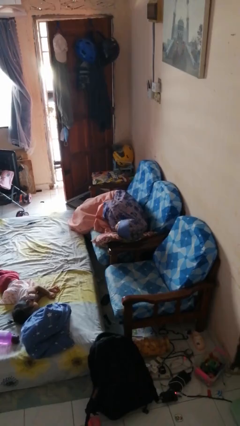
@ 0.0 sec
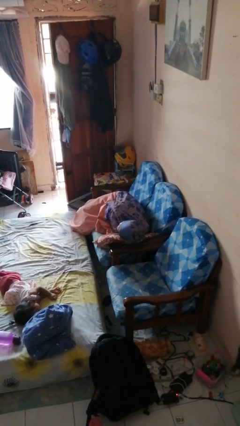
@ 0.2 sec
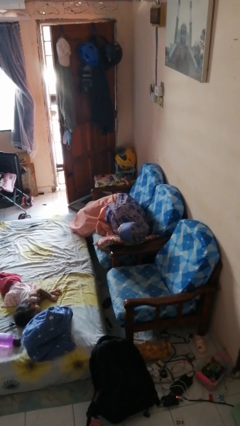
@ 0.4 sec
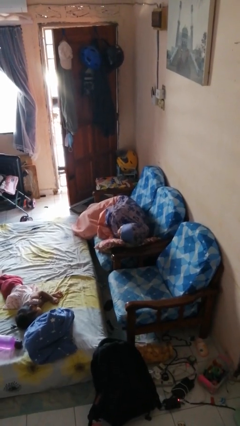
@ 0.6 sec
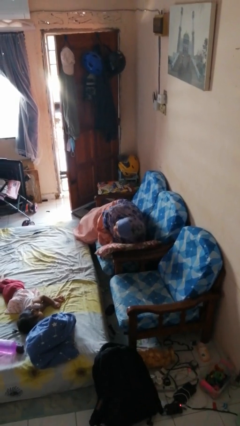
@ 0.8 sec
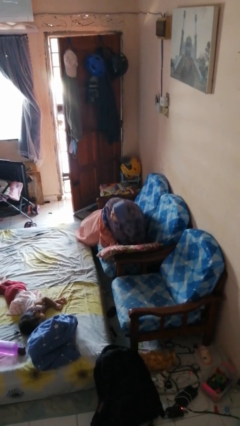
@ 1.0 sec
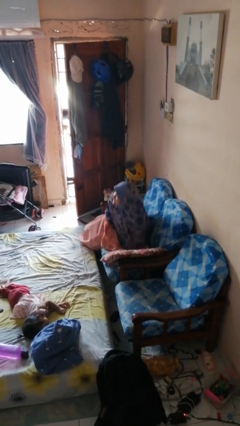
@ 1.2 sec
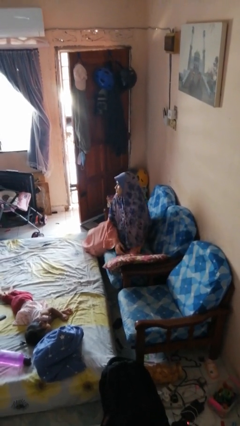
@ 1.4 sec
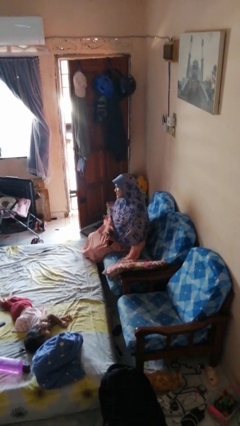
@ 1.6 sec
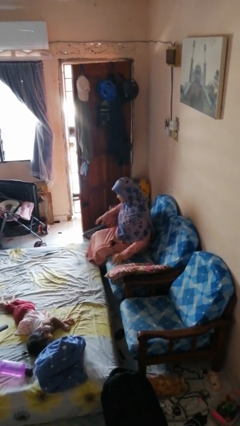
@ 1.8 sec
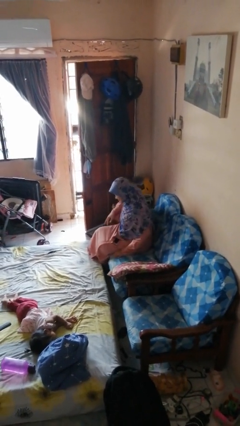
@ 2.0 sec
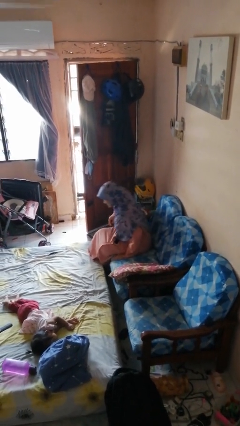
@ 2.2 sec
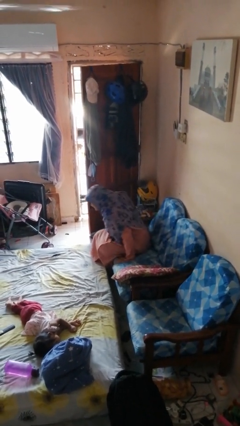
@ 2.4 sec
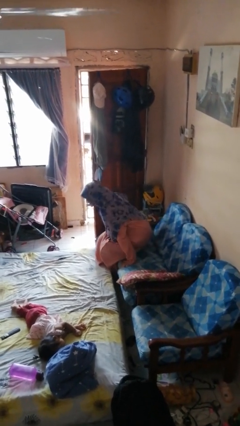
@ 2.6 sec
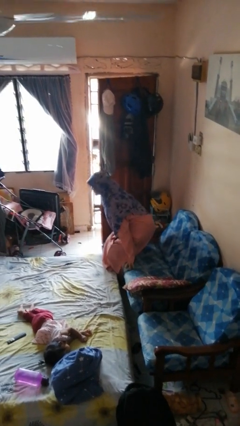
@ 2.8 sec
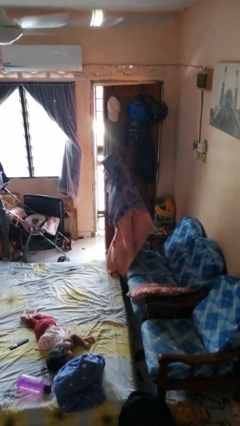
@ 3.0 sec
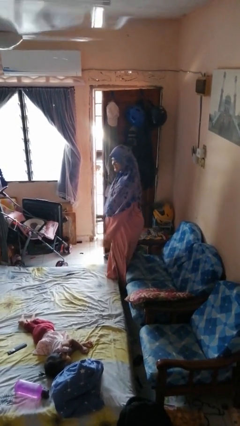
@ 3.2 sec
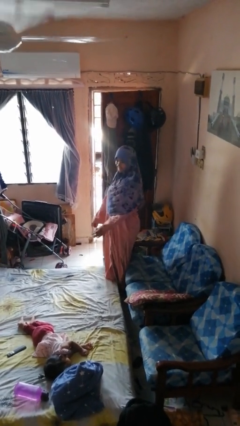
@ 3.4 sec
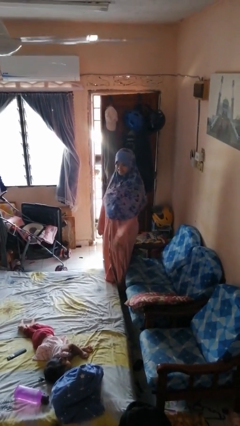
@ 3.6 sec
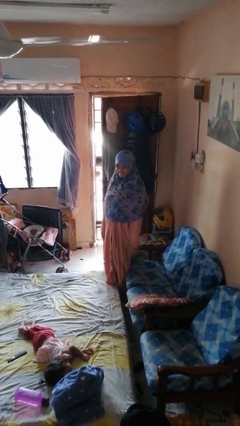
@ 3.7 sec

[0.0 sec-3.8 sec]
person stands up

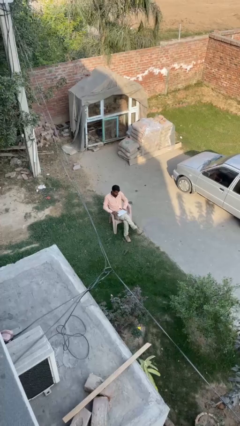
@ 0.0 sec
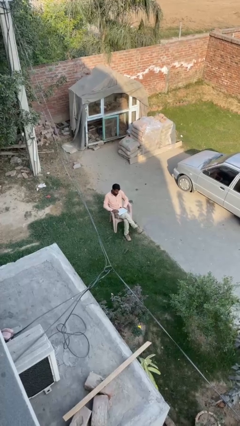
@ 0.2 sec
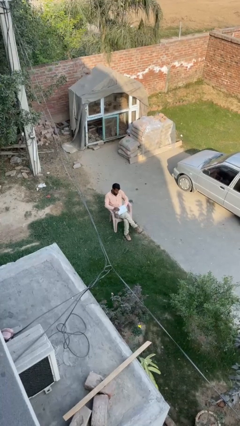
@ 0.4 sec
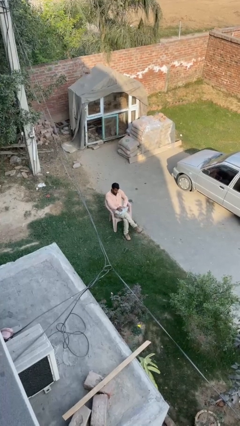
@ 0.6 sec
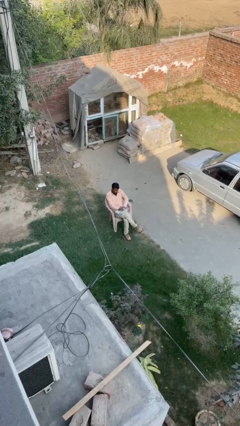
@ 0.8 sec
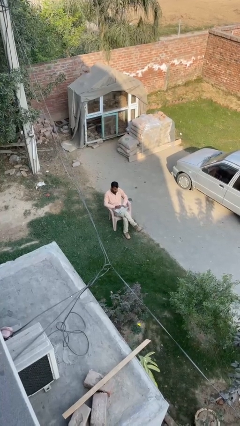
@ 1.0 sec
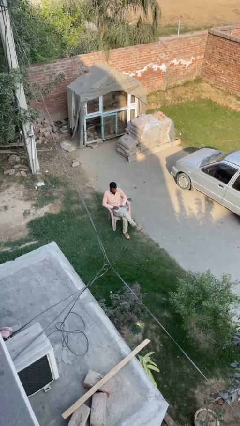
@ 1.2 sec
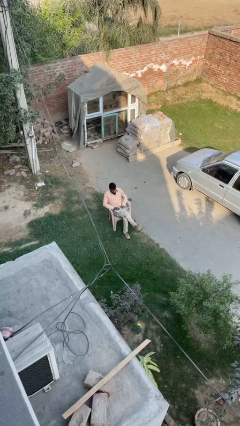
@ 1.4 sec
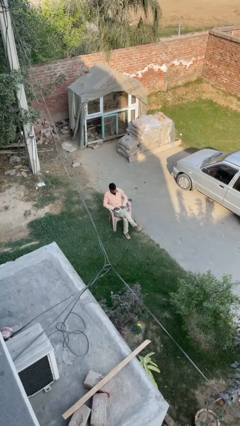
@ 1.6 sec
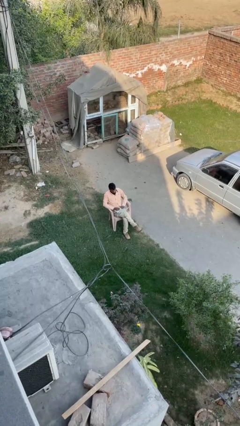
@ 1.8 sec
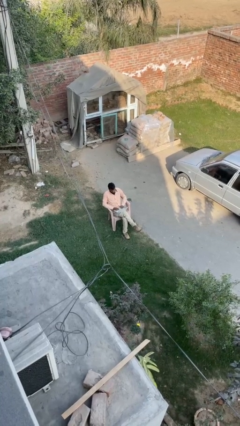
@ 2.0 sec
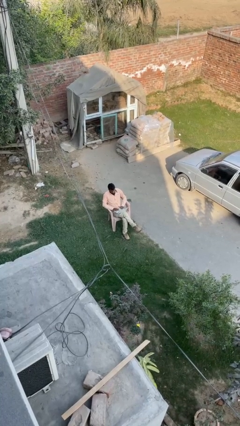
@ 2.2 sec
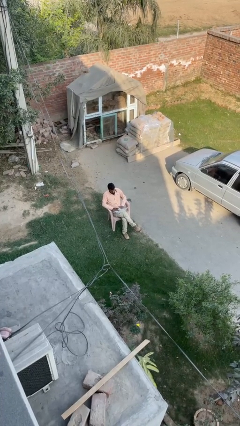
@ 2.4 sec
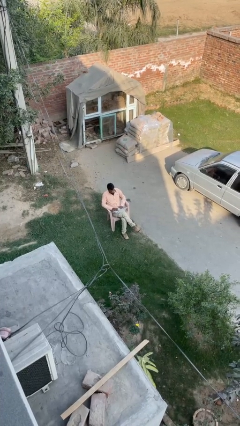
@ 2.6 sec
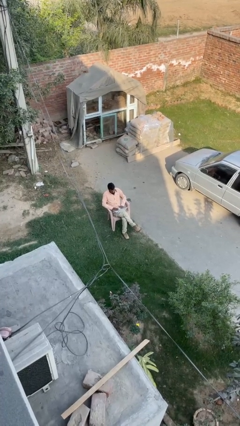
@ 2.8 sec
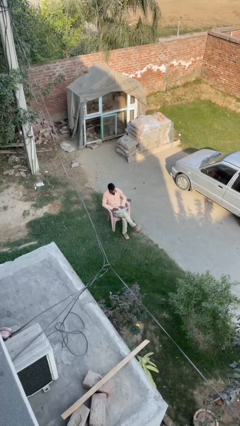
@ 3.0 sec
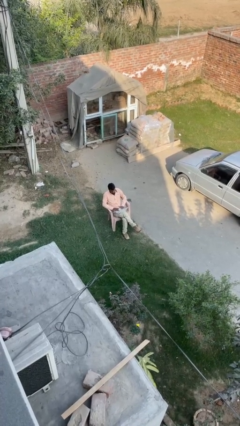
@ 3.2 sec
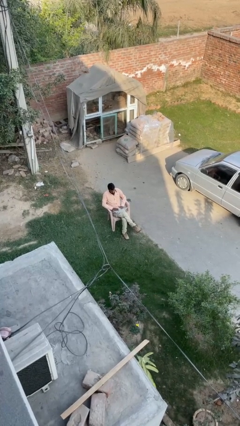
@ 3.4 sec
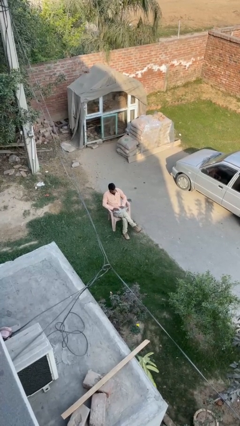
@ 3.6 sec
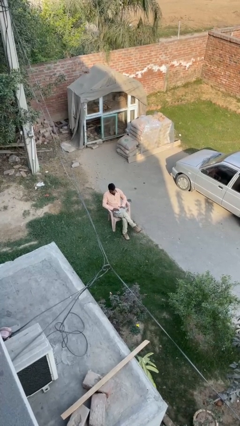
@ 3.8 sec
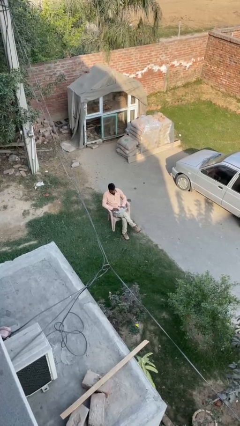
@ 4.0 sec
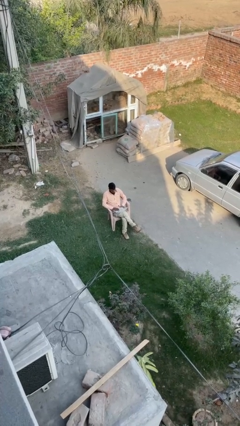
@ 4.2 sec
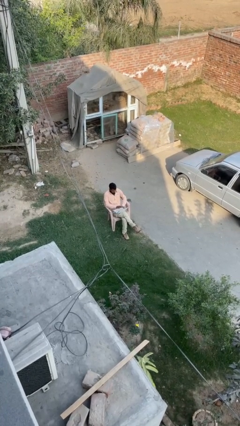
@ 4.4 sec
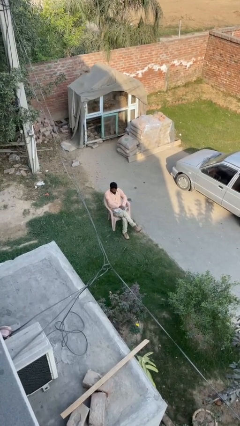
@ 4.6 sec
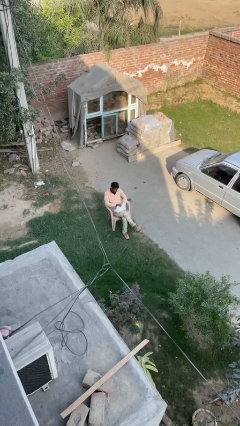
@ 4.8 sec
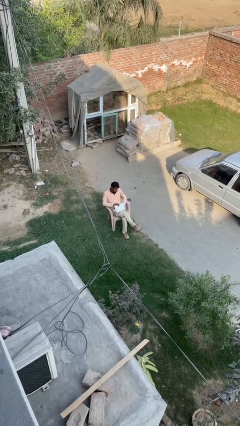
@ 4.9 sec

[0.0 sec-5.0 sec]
person interacts with laptop

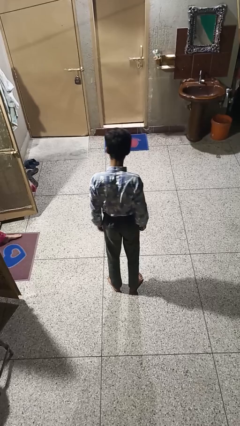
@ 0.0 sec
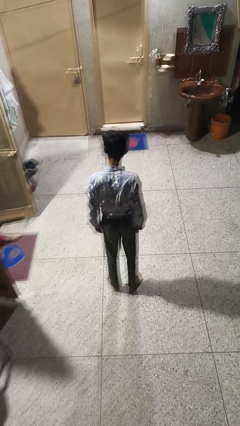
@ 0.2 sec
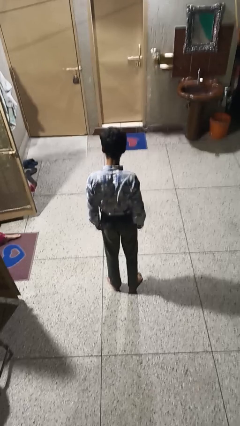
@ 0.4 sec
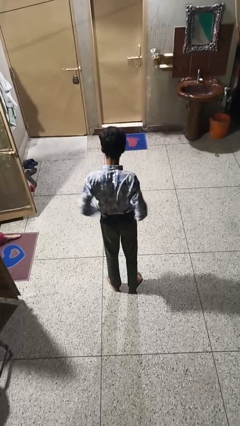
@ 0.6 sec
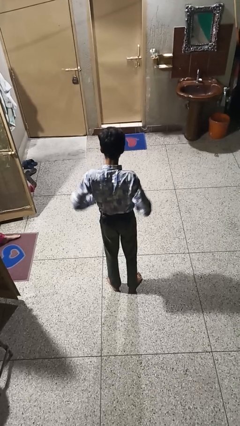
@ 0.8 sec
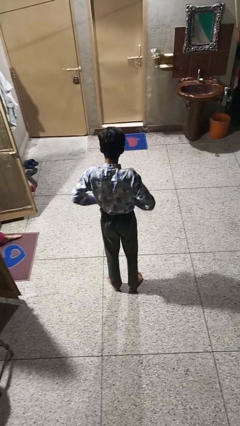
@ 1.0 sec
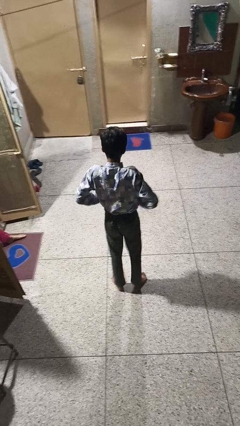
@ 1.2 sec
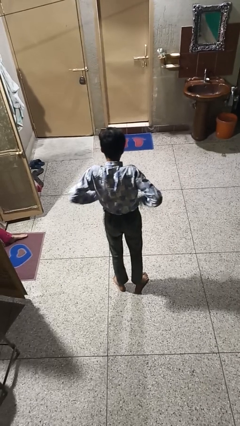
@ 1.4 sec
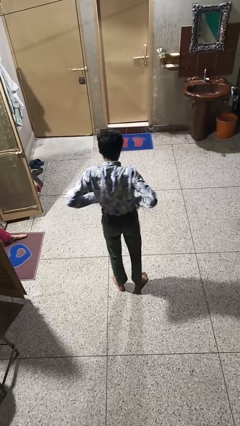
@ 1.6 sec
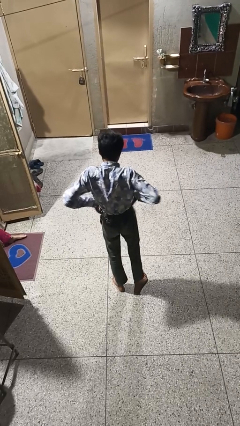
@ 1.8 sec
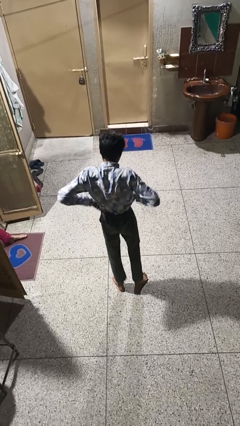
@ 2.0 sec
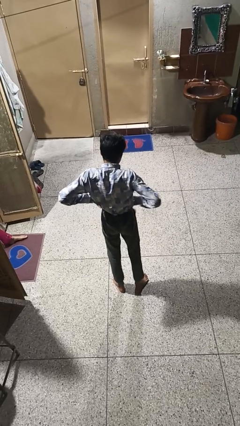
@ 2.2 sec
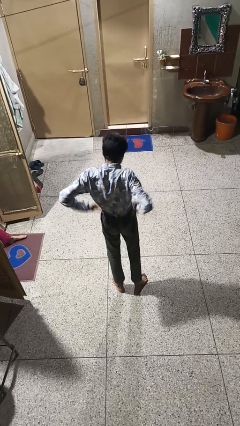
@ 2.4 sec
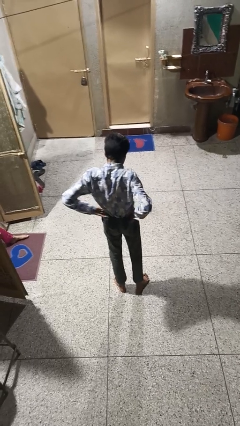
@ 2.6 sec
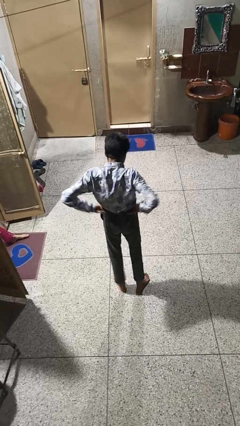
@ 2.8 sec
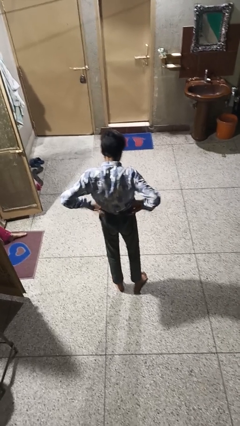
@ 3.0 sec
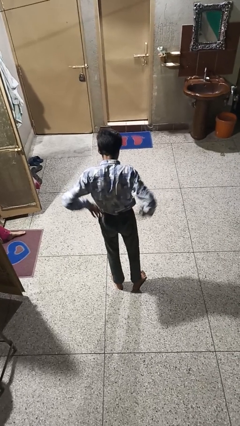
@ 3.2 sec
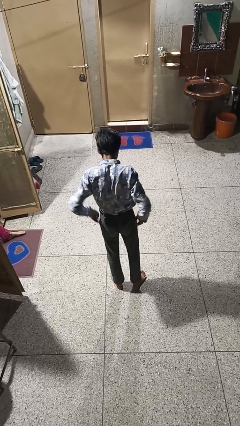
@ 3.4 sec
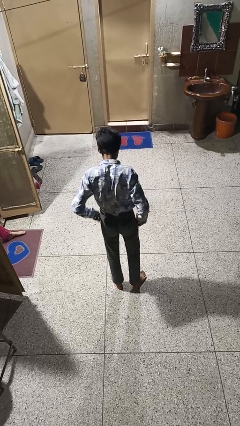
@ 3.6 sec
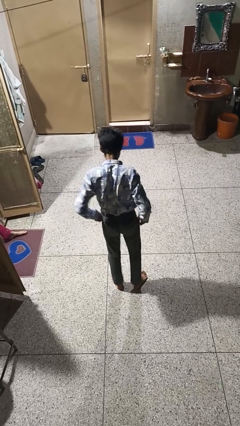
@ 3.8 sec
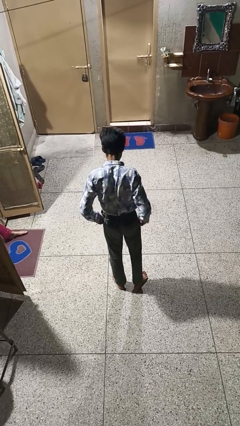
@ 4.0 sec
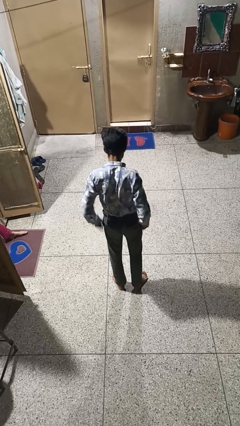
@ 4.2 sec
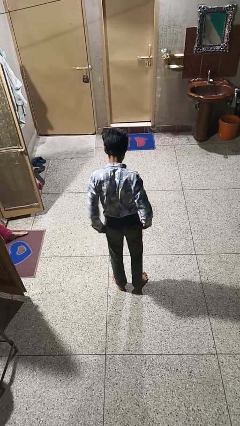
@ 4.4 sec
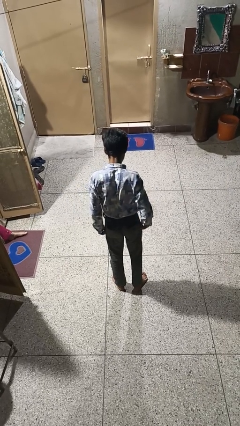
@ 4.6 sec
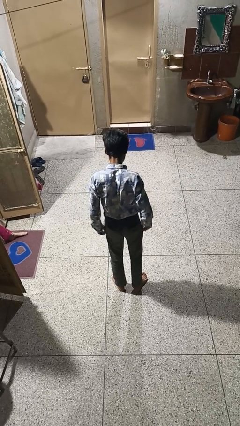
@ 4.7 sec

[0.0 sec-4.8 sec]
person hikes up pants

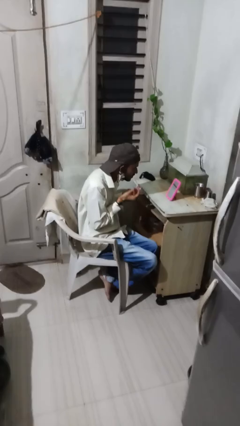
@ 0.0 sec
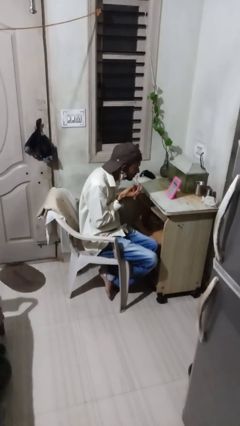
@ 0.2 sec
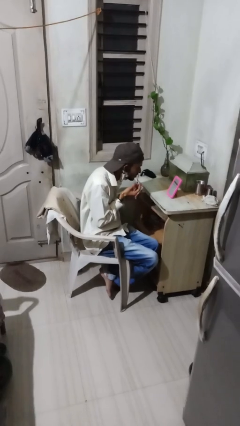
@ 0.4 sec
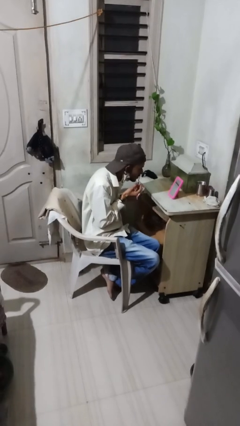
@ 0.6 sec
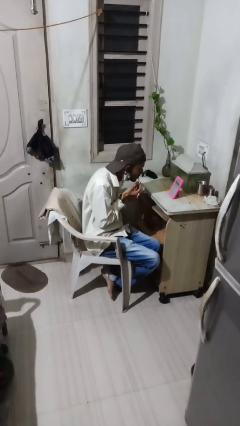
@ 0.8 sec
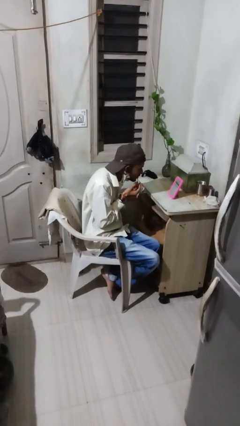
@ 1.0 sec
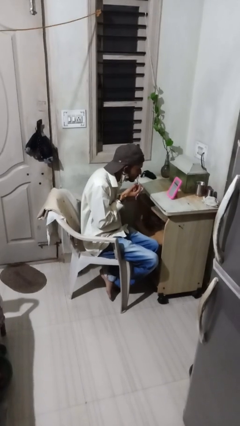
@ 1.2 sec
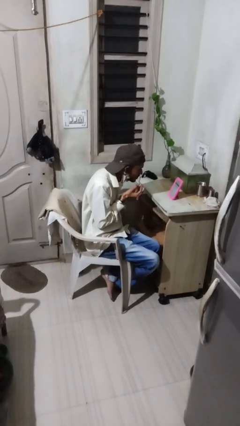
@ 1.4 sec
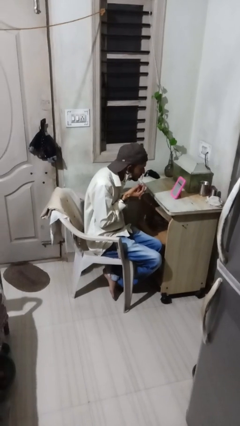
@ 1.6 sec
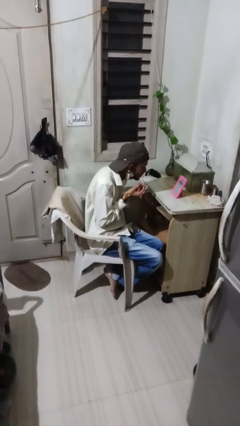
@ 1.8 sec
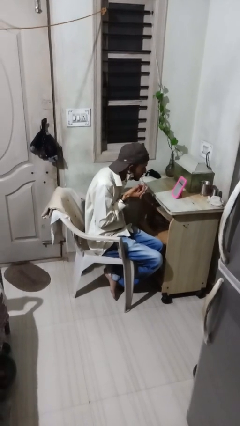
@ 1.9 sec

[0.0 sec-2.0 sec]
person applies lip makeup

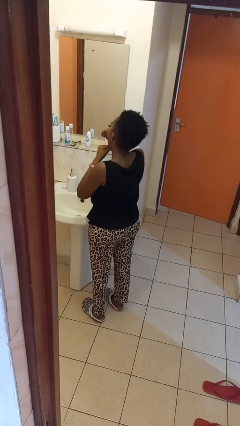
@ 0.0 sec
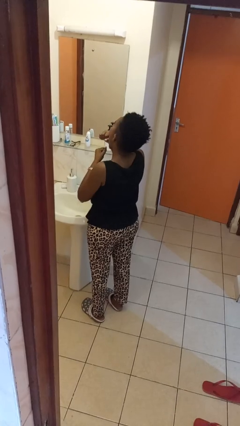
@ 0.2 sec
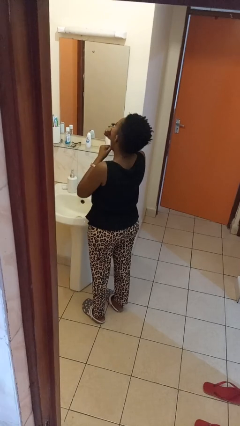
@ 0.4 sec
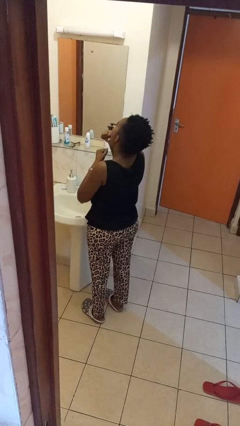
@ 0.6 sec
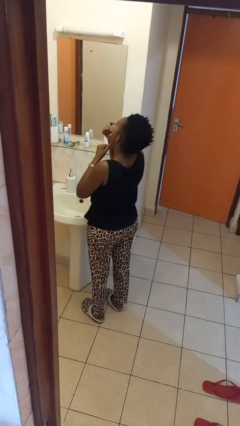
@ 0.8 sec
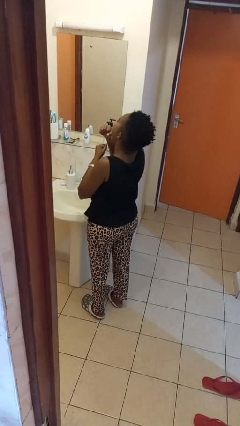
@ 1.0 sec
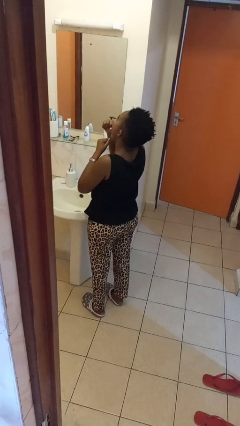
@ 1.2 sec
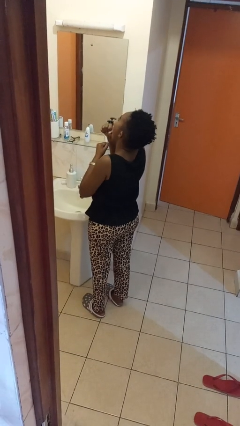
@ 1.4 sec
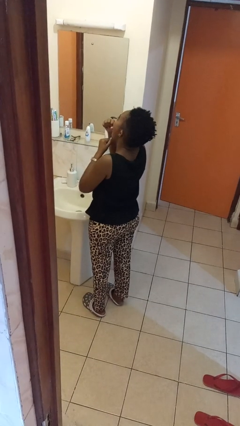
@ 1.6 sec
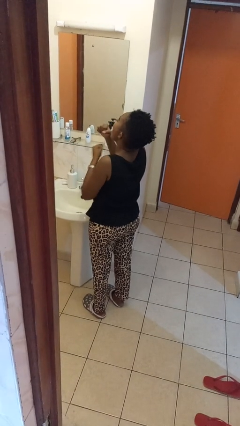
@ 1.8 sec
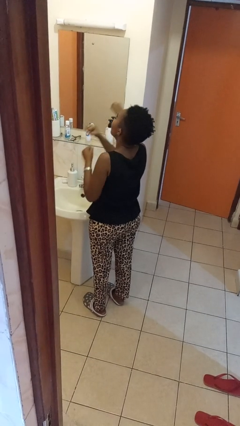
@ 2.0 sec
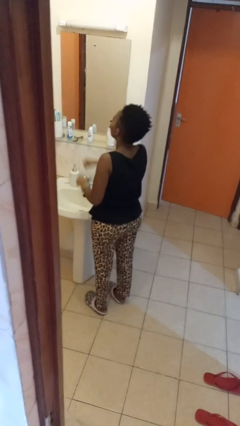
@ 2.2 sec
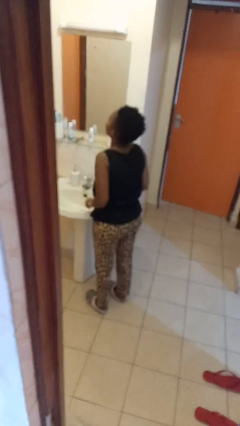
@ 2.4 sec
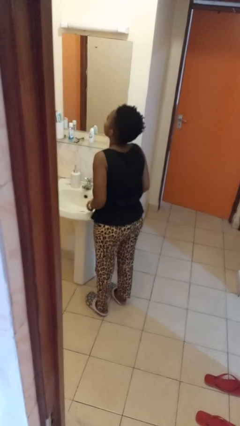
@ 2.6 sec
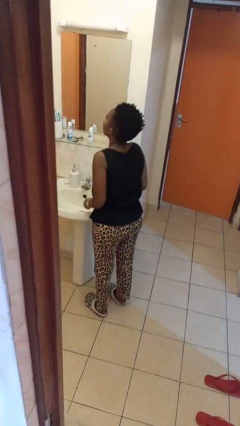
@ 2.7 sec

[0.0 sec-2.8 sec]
person flosses
